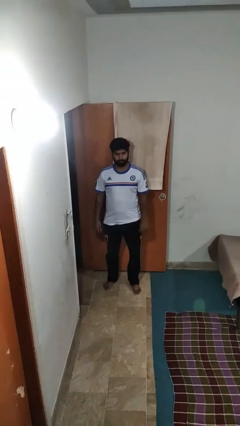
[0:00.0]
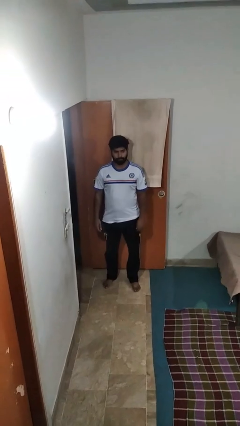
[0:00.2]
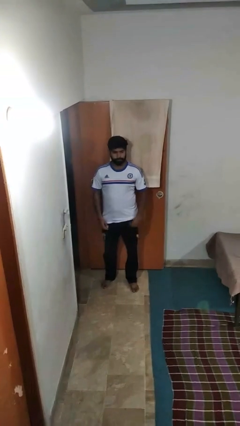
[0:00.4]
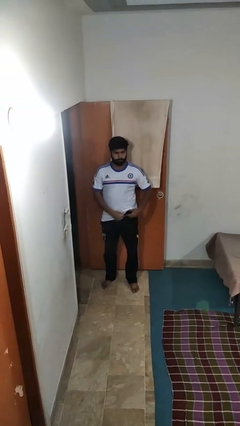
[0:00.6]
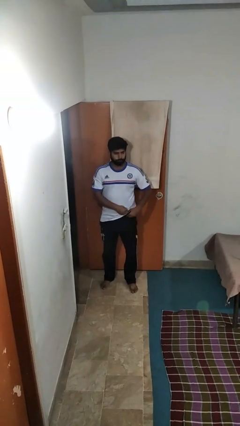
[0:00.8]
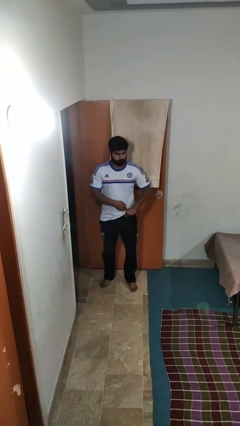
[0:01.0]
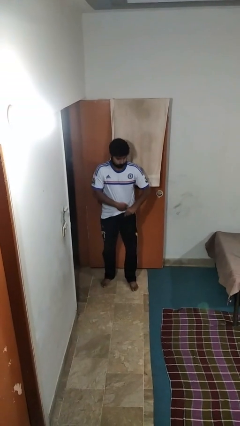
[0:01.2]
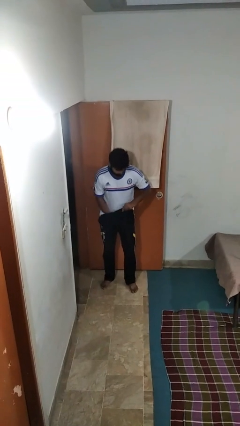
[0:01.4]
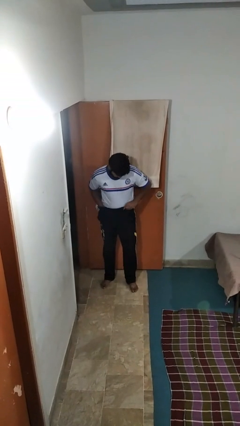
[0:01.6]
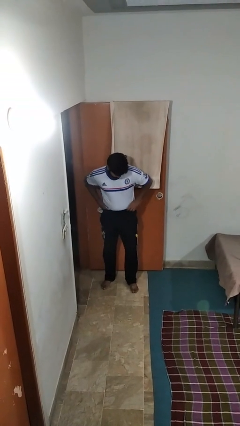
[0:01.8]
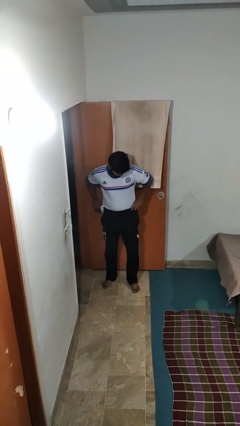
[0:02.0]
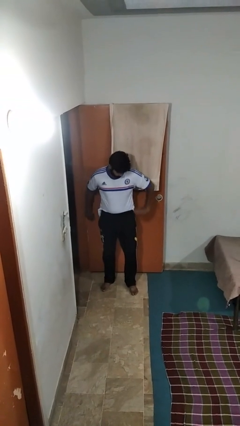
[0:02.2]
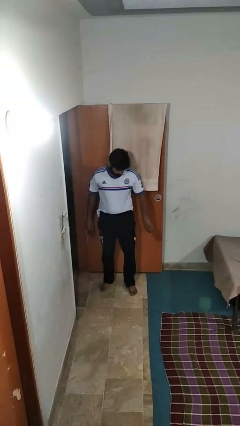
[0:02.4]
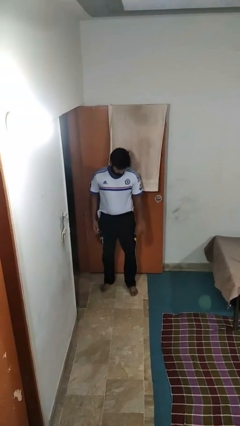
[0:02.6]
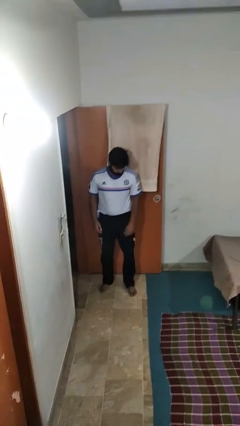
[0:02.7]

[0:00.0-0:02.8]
person tucks in shirt

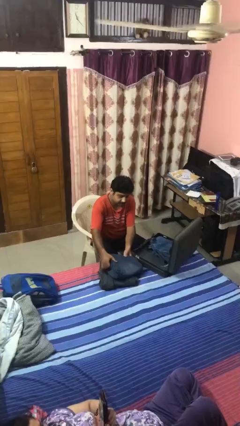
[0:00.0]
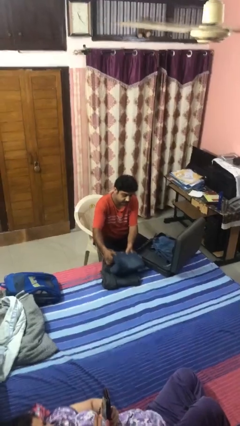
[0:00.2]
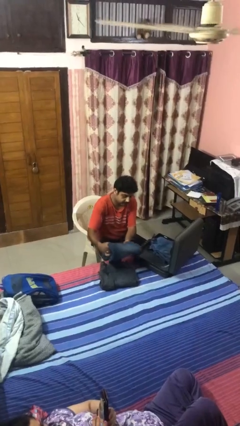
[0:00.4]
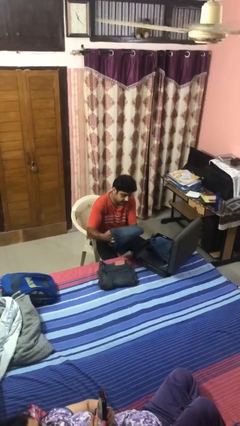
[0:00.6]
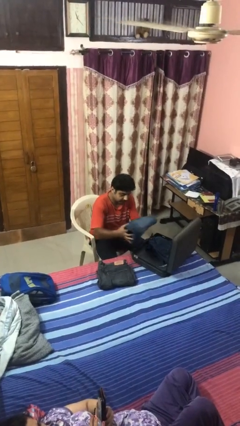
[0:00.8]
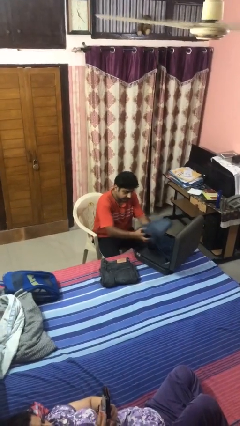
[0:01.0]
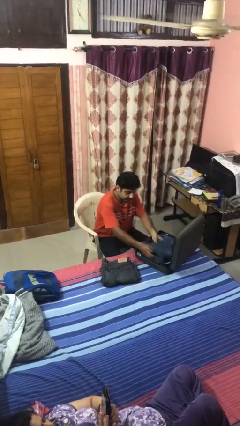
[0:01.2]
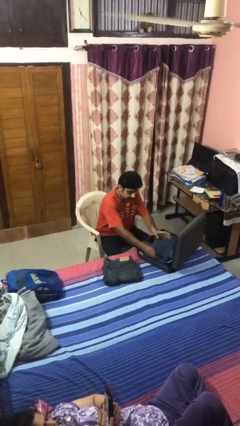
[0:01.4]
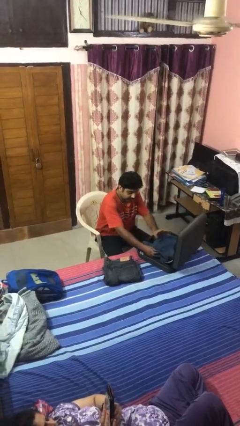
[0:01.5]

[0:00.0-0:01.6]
person loads clothes into suitcase

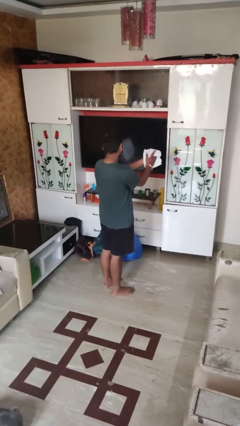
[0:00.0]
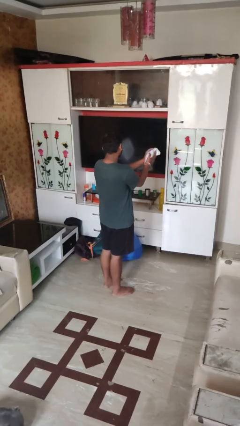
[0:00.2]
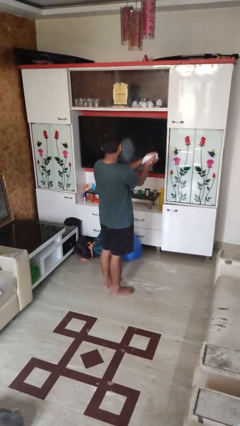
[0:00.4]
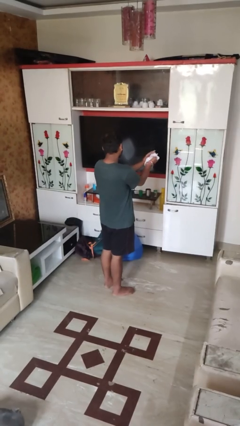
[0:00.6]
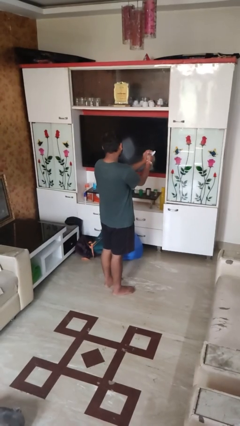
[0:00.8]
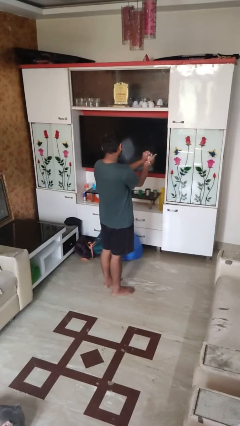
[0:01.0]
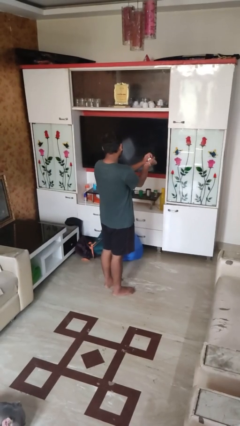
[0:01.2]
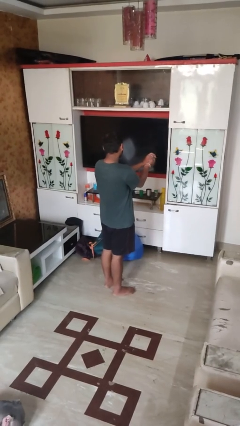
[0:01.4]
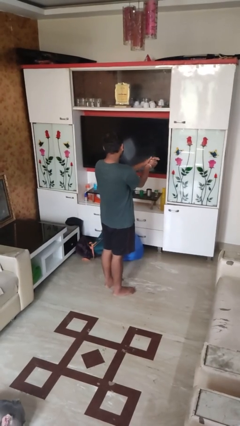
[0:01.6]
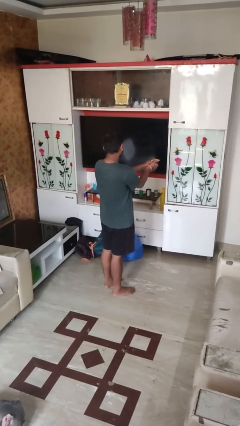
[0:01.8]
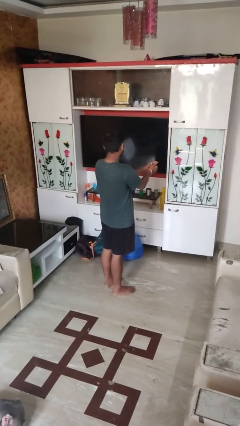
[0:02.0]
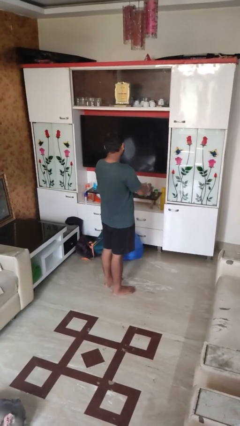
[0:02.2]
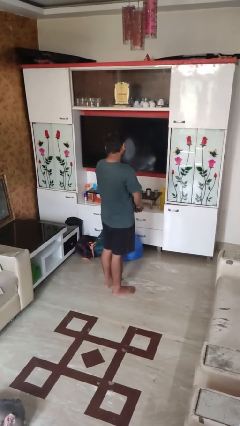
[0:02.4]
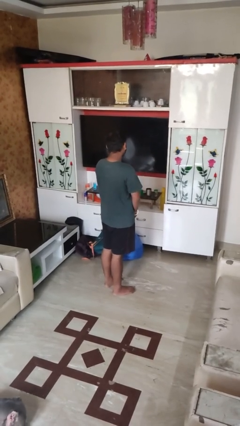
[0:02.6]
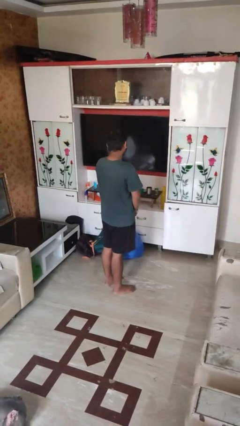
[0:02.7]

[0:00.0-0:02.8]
person crumples paper

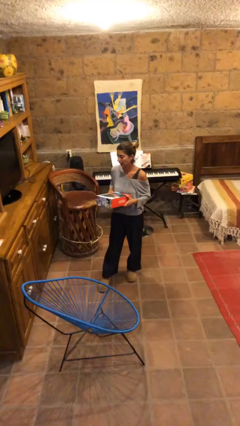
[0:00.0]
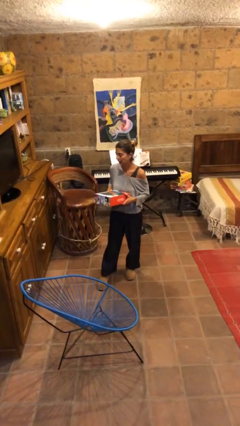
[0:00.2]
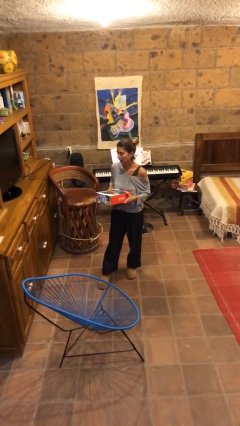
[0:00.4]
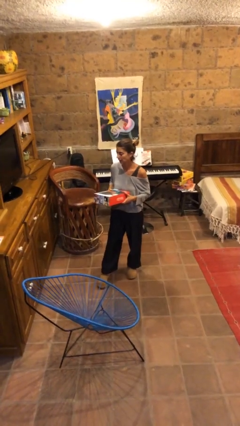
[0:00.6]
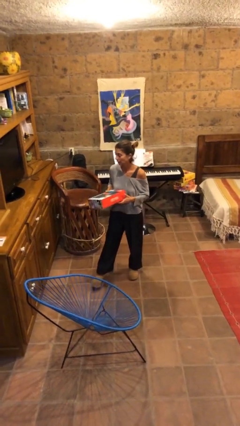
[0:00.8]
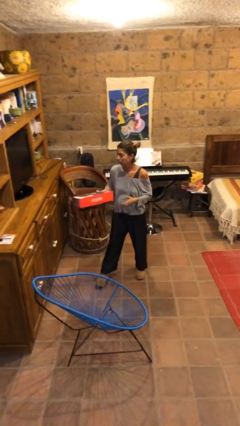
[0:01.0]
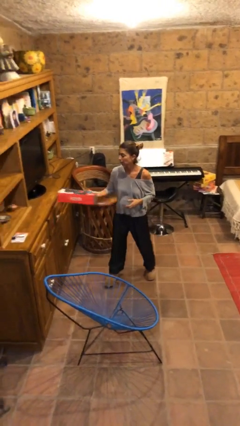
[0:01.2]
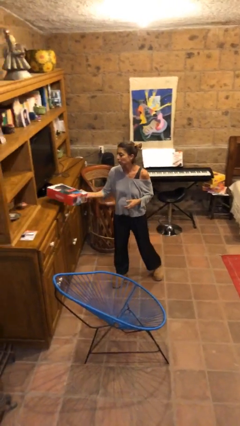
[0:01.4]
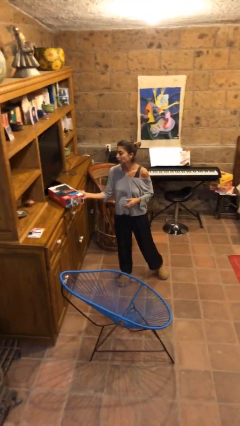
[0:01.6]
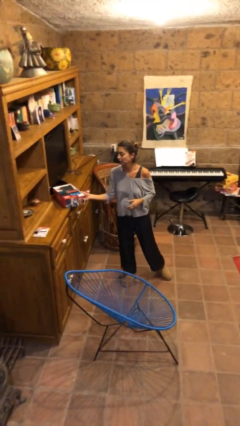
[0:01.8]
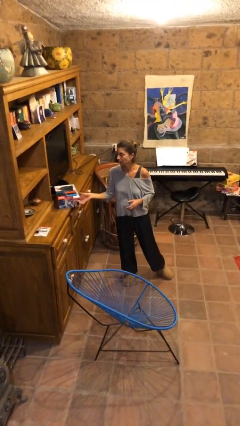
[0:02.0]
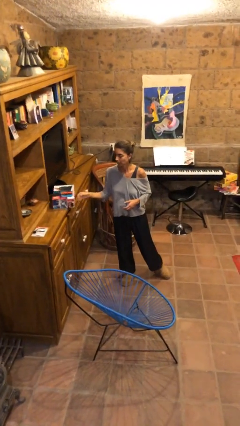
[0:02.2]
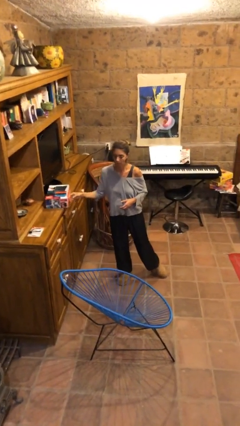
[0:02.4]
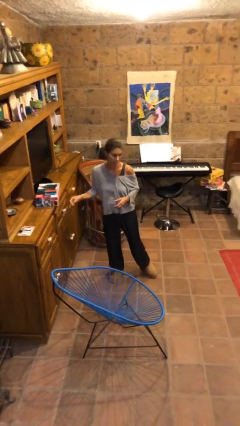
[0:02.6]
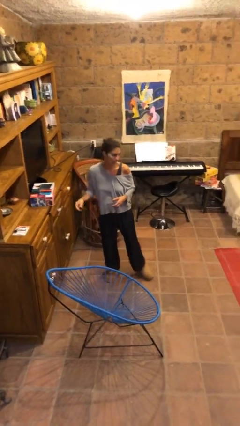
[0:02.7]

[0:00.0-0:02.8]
person puts down object on table

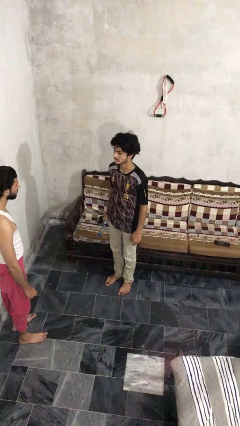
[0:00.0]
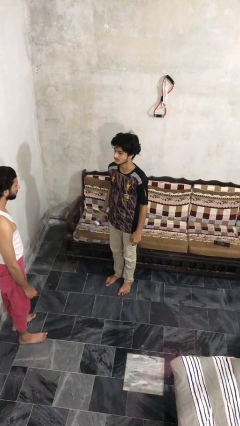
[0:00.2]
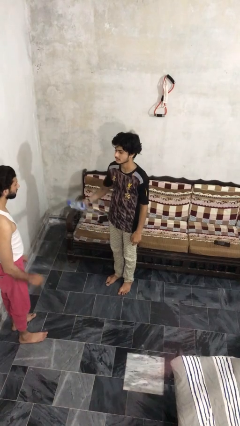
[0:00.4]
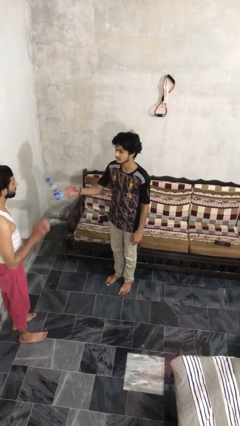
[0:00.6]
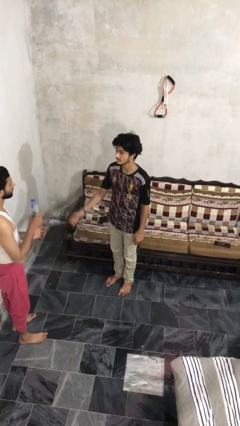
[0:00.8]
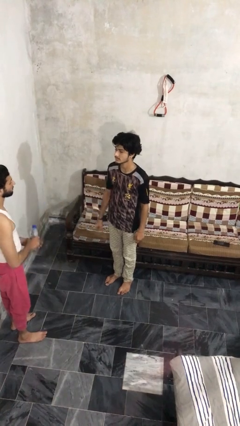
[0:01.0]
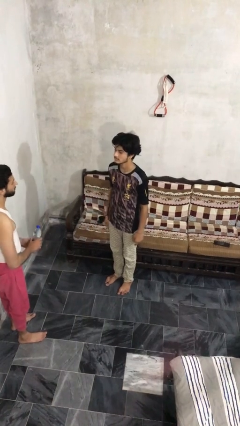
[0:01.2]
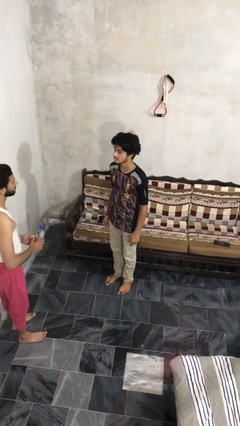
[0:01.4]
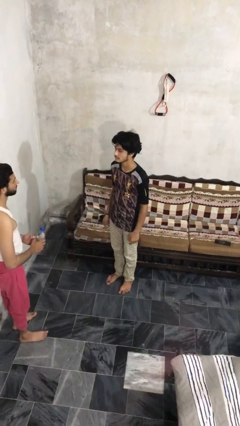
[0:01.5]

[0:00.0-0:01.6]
person throws object to person

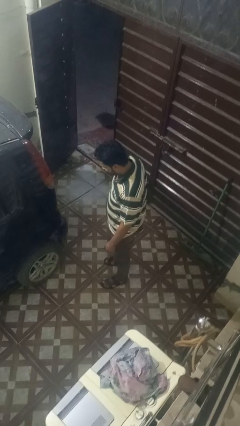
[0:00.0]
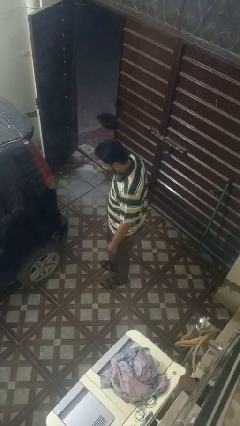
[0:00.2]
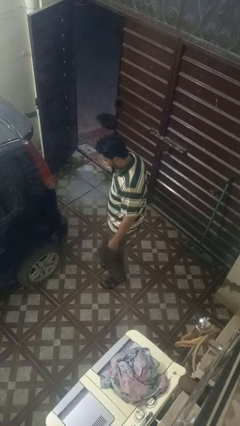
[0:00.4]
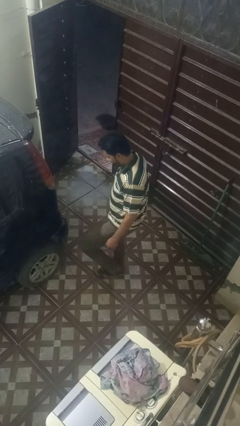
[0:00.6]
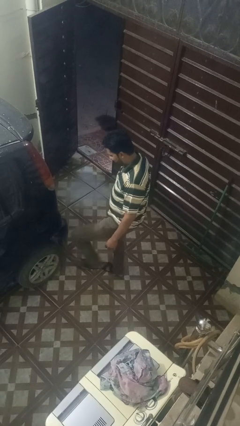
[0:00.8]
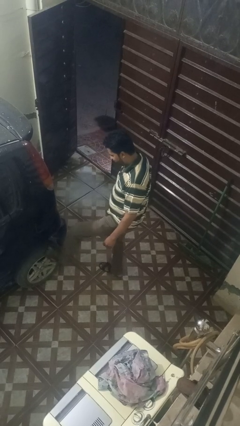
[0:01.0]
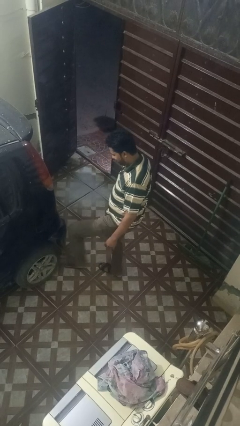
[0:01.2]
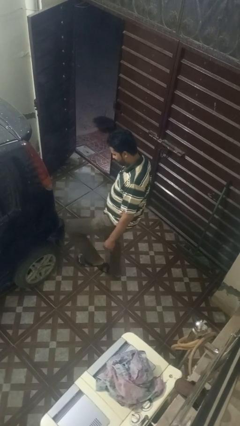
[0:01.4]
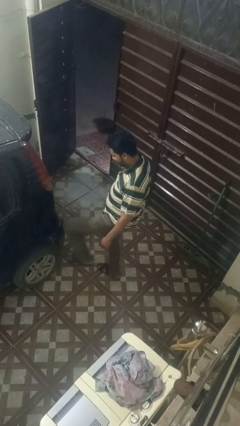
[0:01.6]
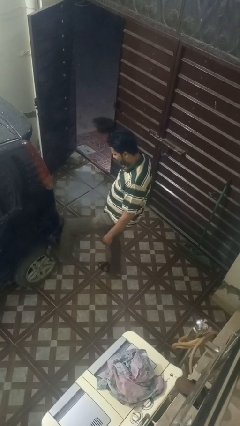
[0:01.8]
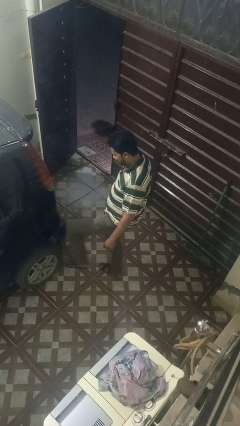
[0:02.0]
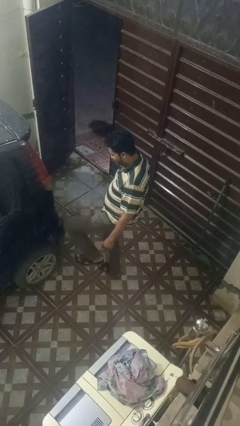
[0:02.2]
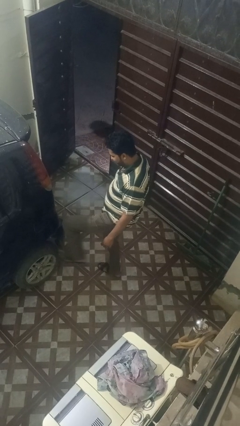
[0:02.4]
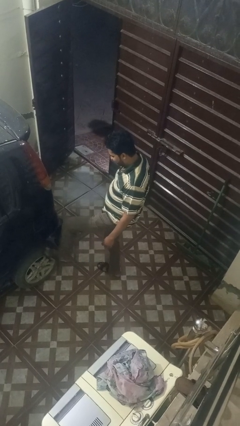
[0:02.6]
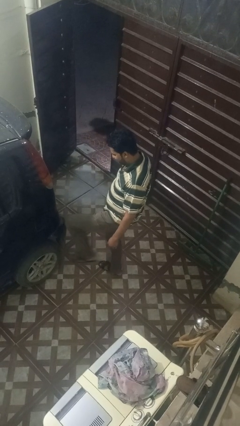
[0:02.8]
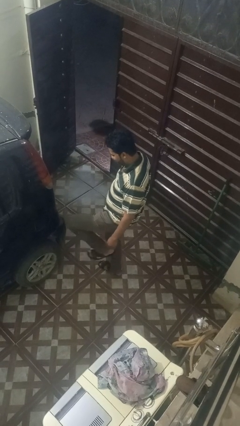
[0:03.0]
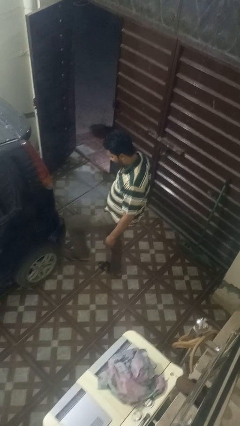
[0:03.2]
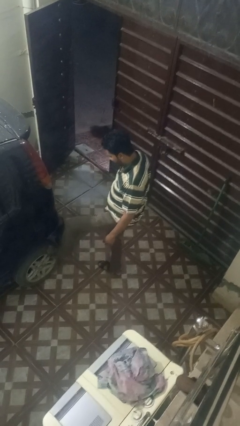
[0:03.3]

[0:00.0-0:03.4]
person kicks car tires

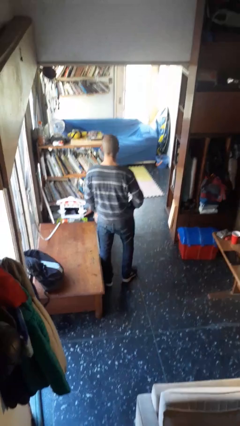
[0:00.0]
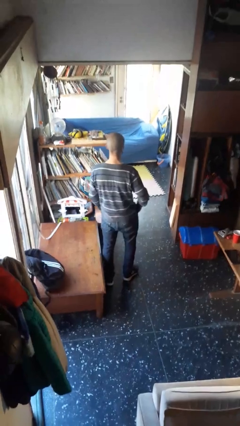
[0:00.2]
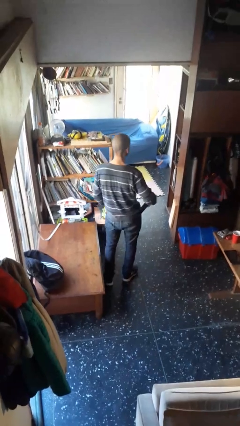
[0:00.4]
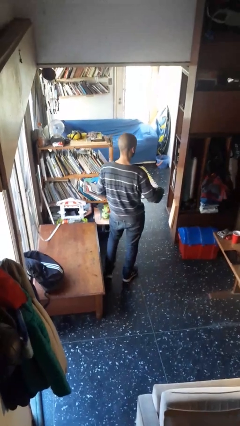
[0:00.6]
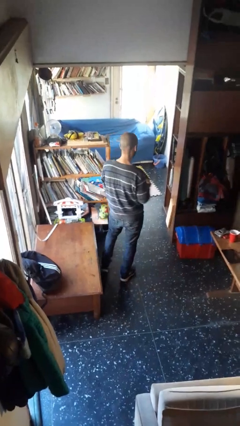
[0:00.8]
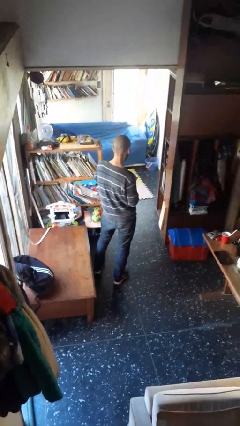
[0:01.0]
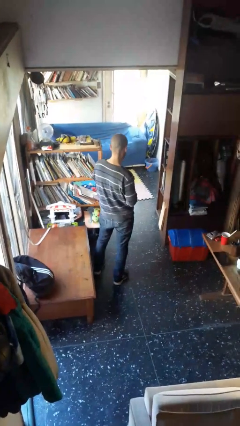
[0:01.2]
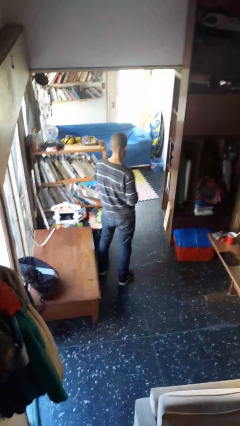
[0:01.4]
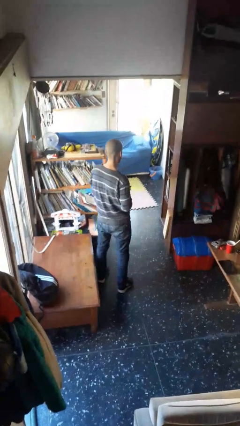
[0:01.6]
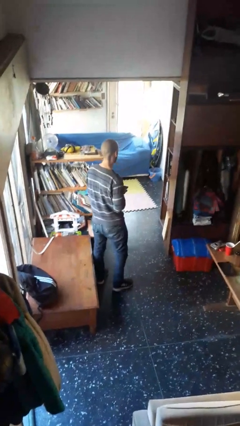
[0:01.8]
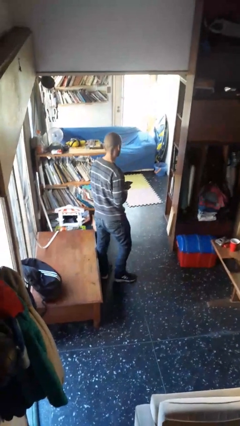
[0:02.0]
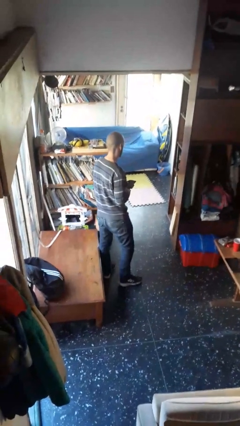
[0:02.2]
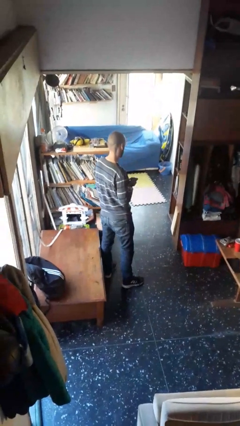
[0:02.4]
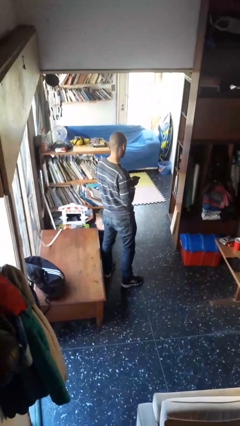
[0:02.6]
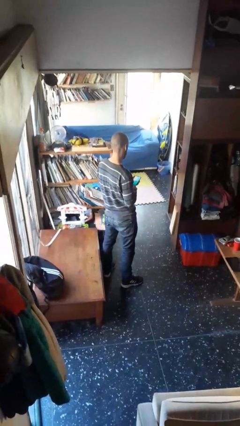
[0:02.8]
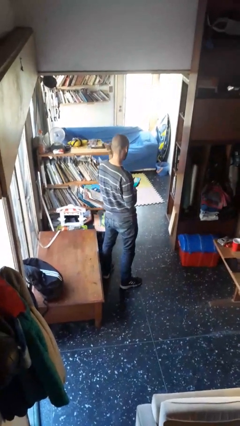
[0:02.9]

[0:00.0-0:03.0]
person takes phone from pocket
